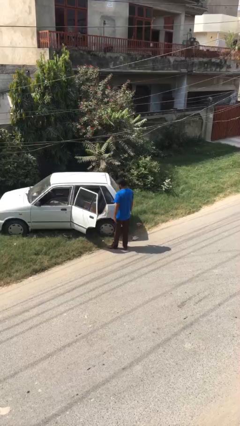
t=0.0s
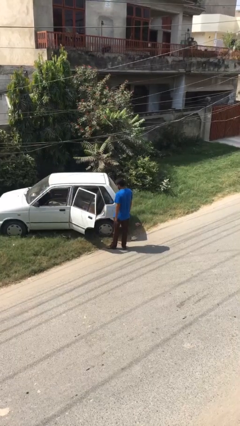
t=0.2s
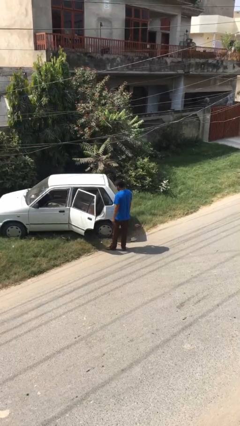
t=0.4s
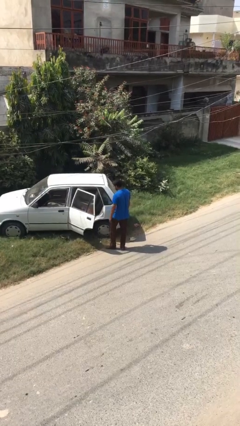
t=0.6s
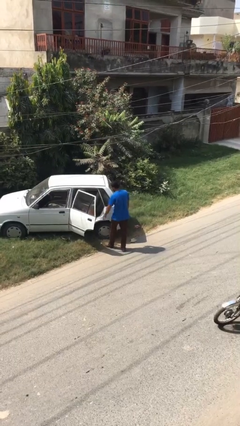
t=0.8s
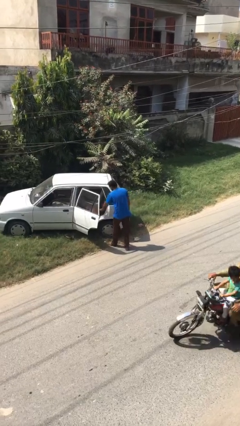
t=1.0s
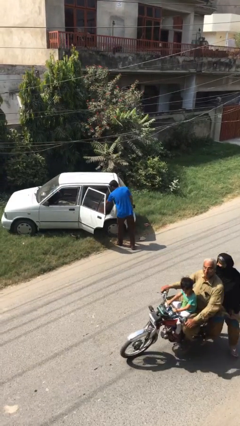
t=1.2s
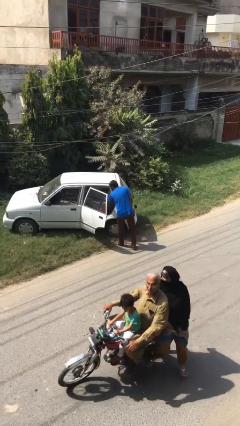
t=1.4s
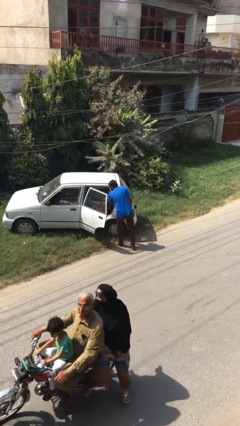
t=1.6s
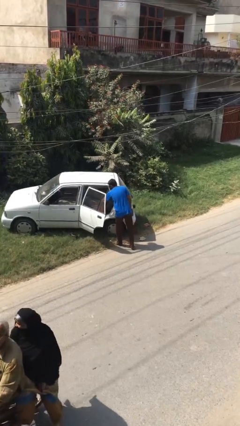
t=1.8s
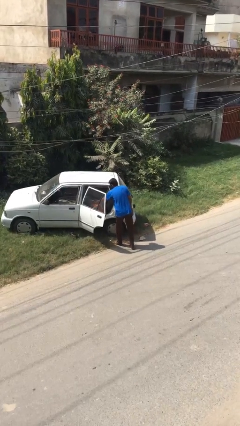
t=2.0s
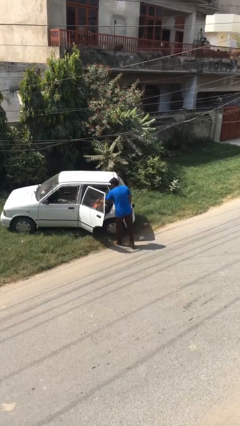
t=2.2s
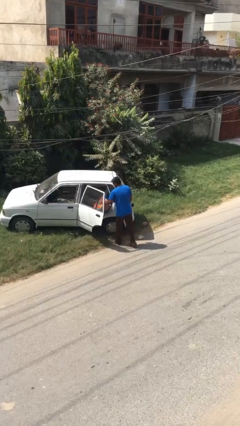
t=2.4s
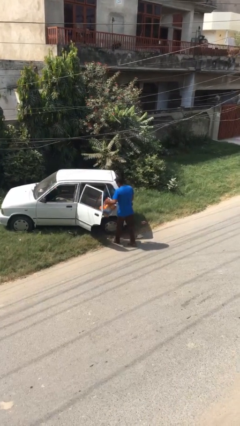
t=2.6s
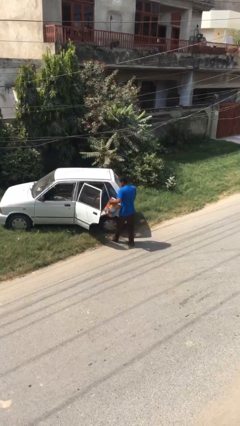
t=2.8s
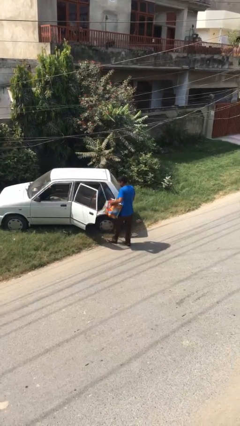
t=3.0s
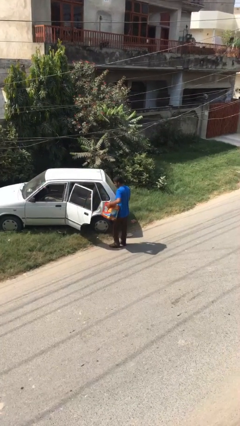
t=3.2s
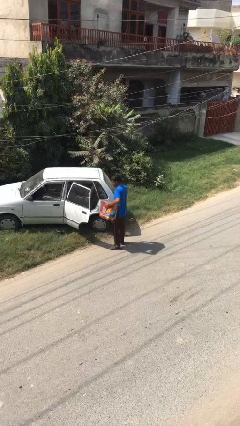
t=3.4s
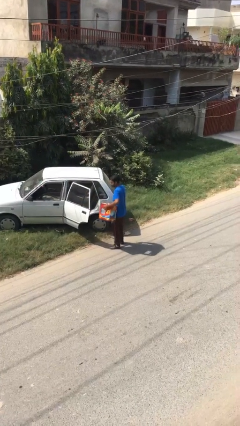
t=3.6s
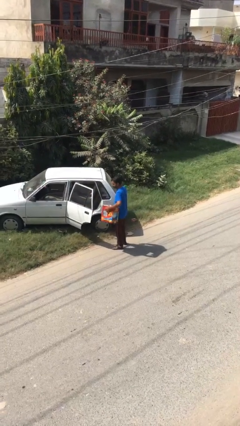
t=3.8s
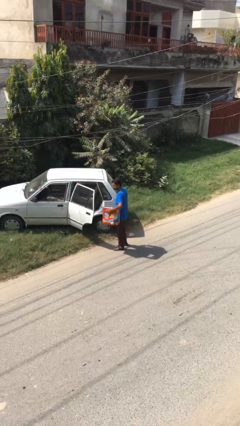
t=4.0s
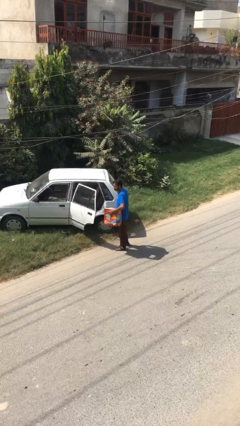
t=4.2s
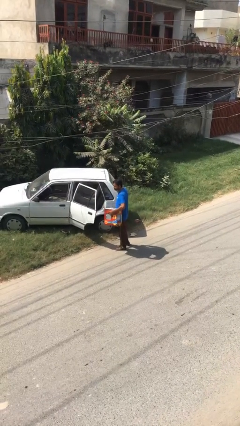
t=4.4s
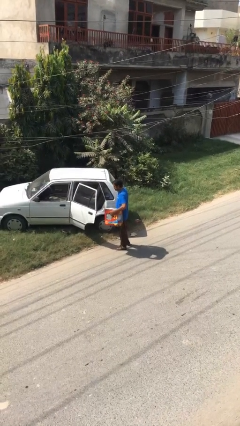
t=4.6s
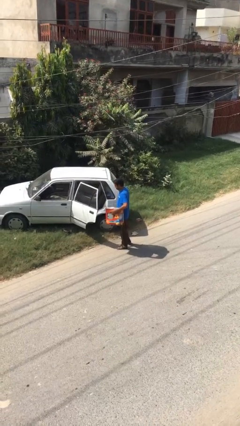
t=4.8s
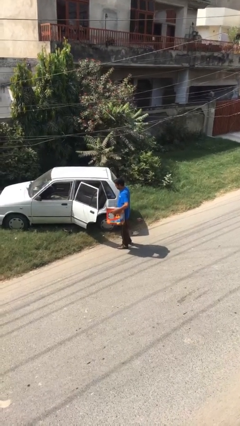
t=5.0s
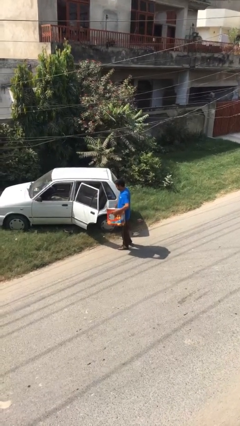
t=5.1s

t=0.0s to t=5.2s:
person unloads car

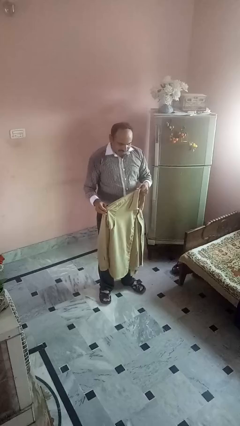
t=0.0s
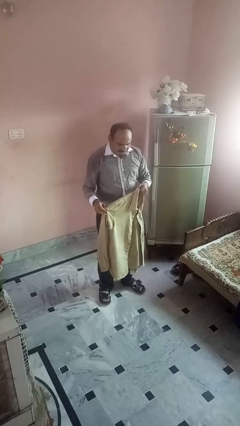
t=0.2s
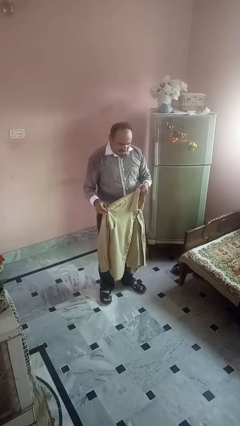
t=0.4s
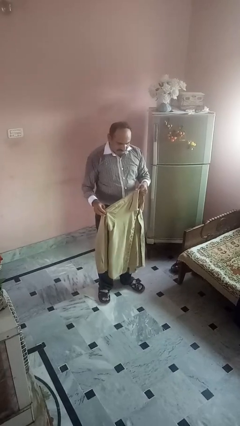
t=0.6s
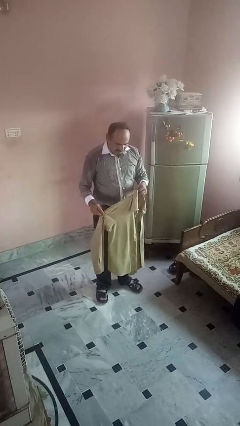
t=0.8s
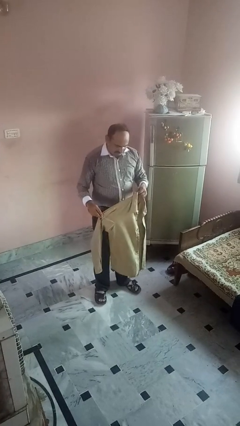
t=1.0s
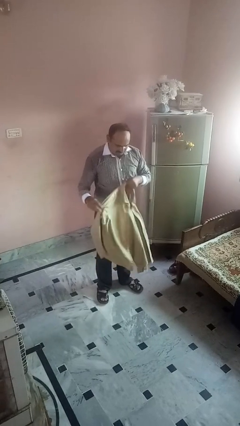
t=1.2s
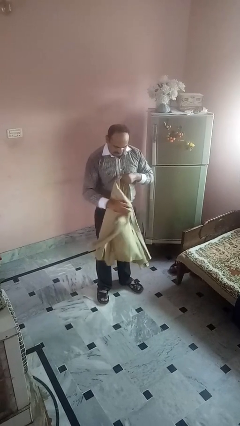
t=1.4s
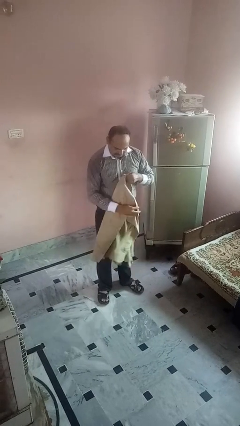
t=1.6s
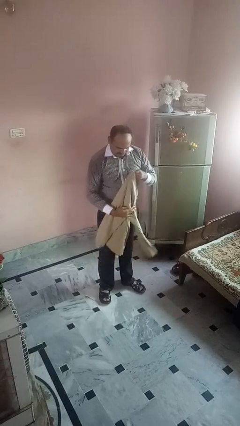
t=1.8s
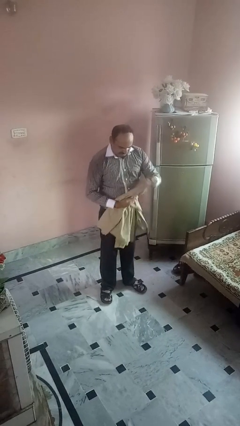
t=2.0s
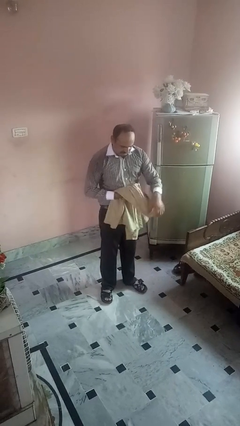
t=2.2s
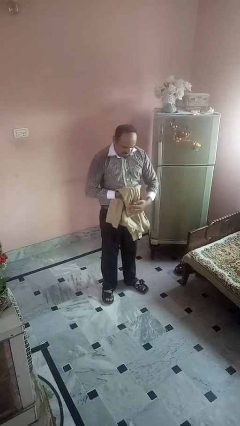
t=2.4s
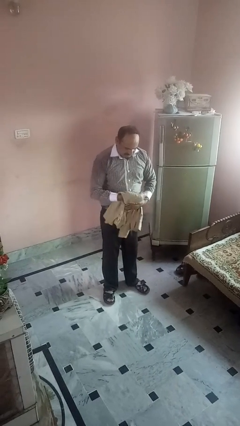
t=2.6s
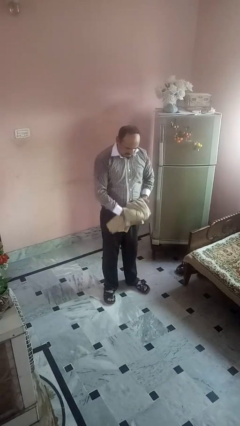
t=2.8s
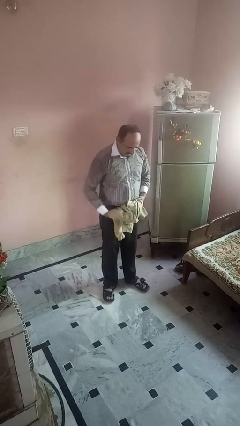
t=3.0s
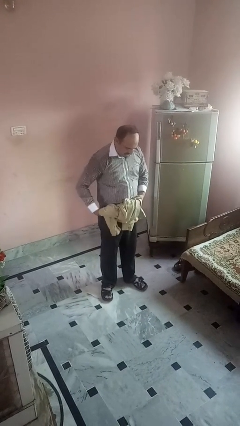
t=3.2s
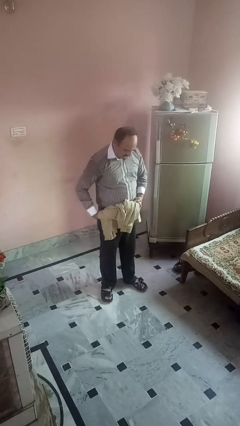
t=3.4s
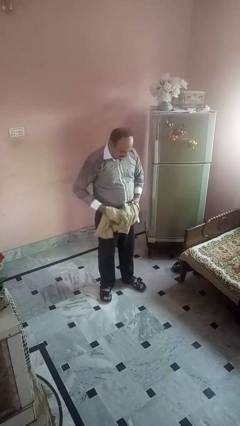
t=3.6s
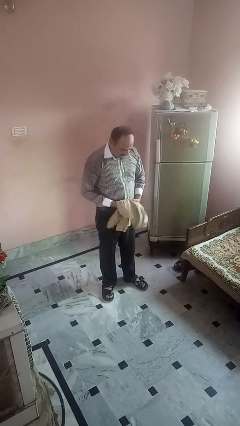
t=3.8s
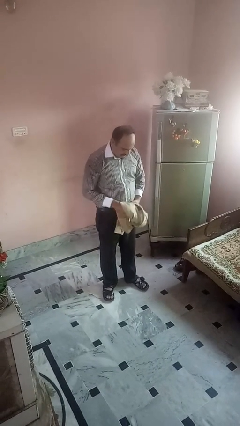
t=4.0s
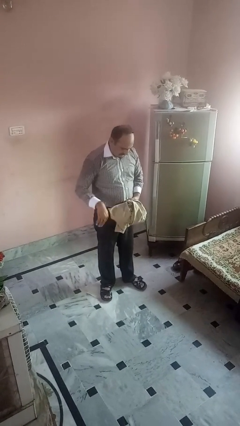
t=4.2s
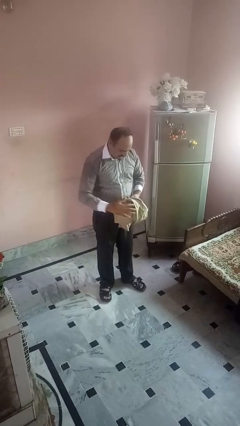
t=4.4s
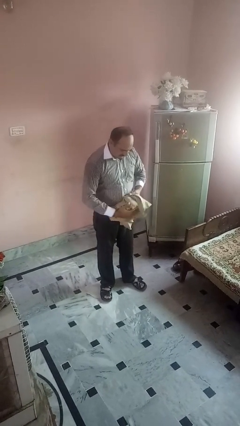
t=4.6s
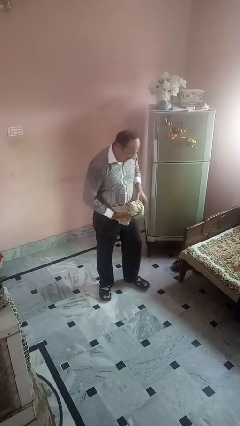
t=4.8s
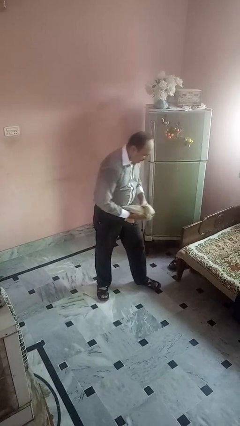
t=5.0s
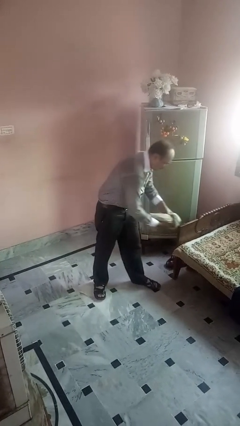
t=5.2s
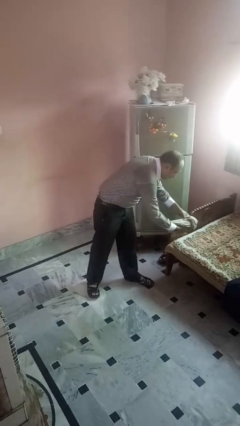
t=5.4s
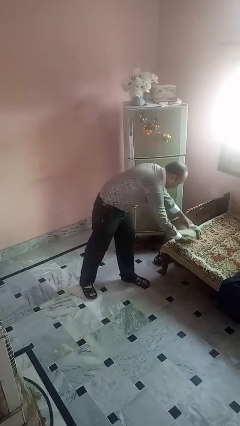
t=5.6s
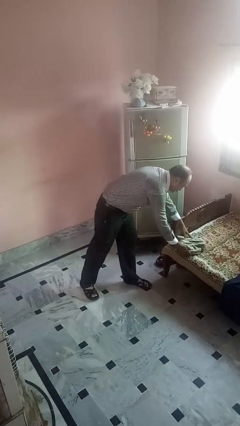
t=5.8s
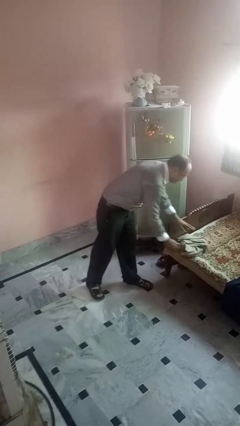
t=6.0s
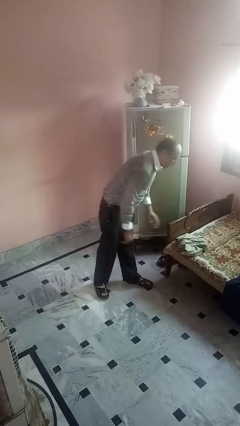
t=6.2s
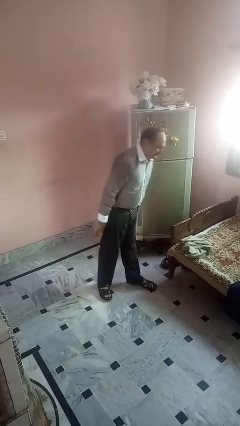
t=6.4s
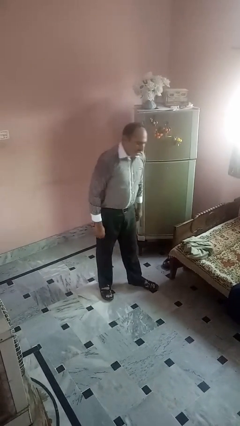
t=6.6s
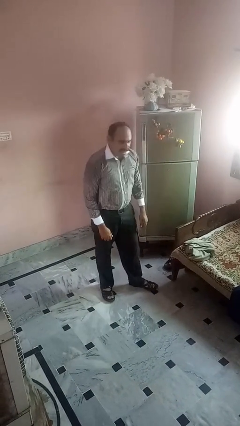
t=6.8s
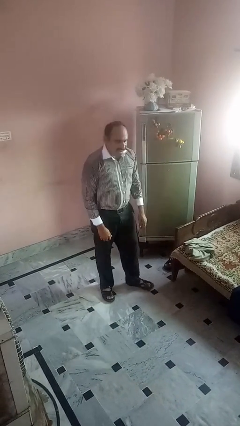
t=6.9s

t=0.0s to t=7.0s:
person folds shirt

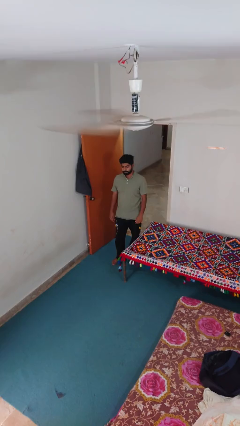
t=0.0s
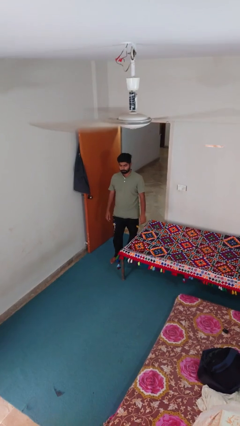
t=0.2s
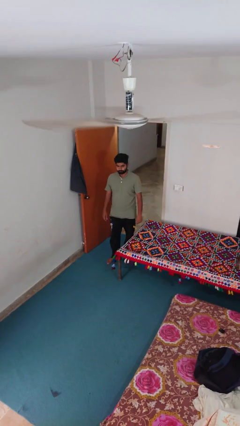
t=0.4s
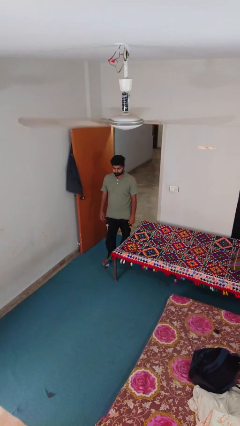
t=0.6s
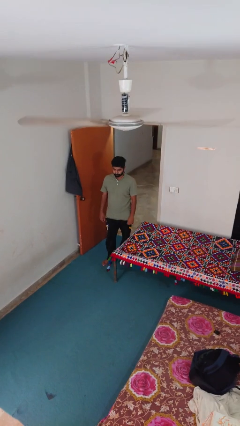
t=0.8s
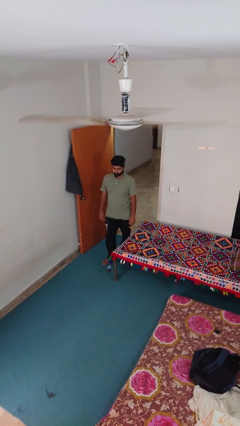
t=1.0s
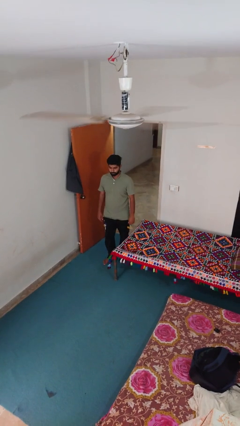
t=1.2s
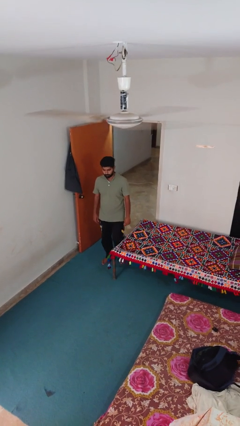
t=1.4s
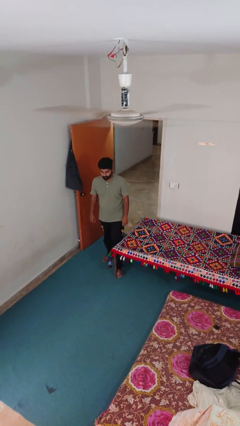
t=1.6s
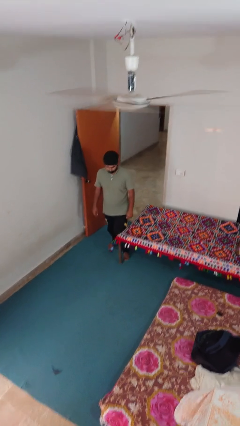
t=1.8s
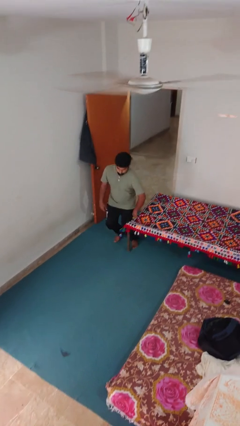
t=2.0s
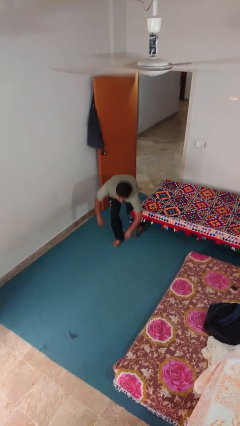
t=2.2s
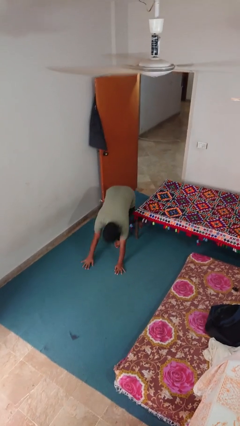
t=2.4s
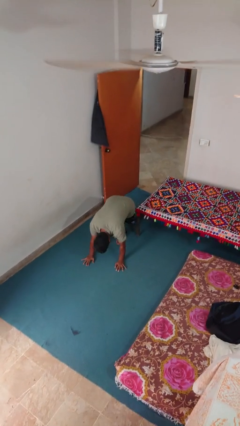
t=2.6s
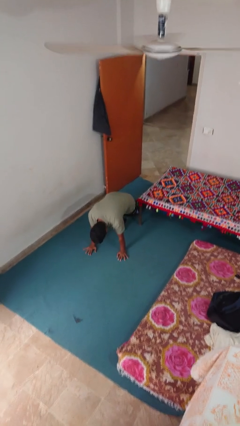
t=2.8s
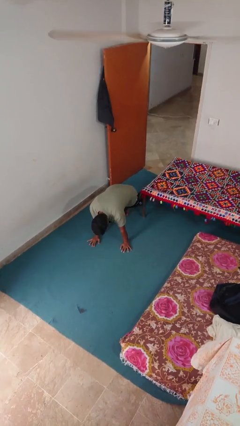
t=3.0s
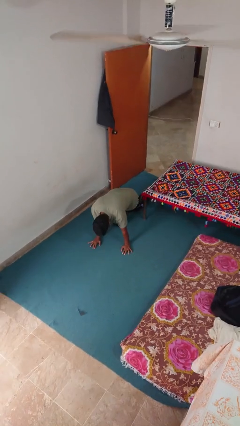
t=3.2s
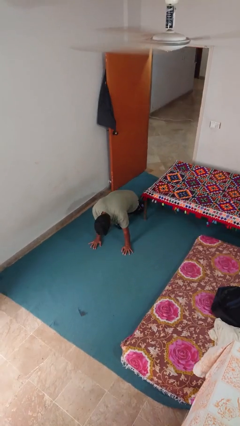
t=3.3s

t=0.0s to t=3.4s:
person trips on object on floor

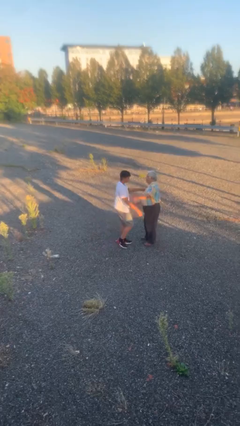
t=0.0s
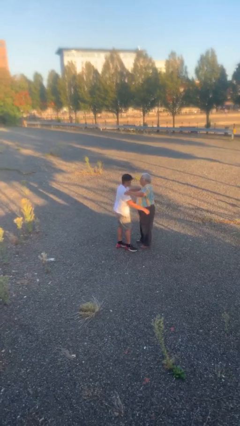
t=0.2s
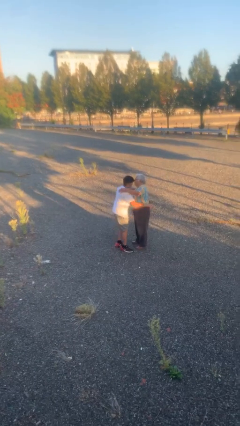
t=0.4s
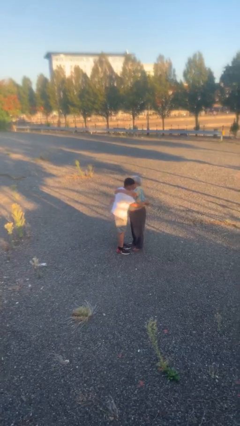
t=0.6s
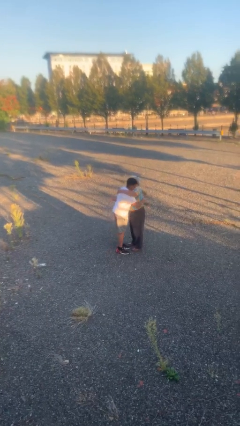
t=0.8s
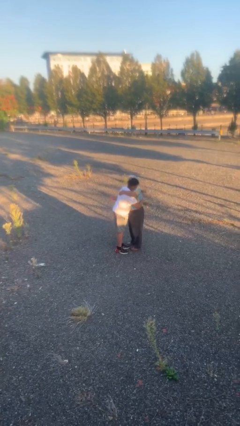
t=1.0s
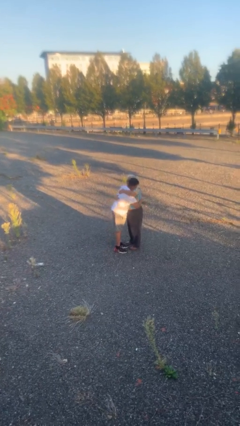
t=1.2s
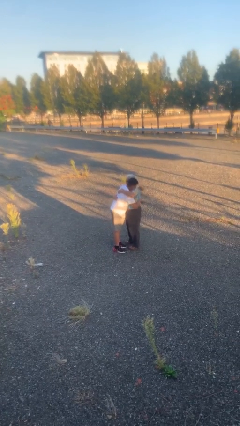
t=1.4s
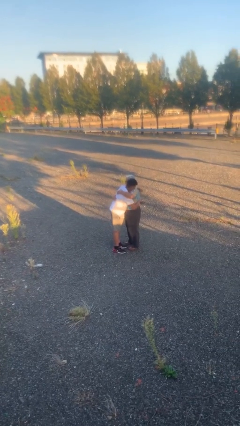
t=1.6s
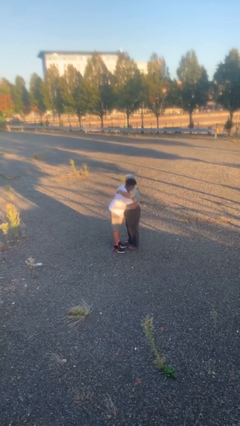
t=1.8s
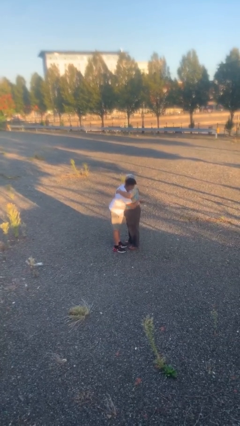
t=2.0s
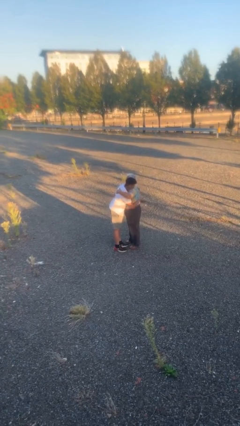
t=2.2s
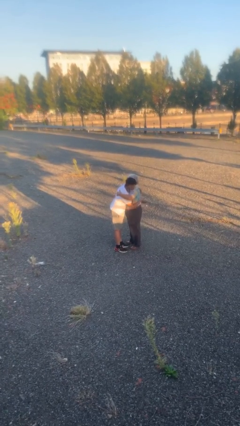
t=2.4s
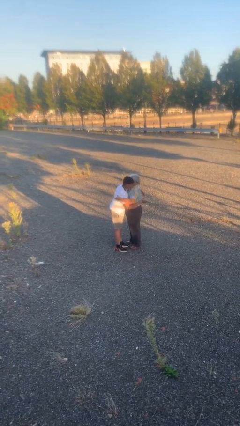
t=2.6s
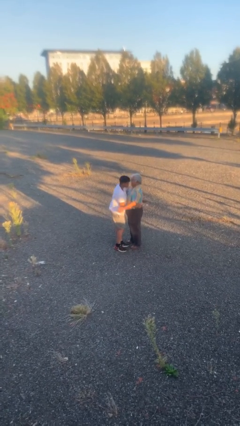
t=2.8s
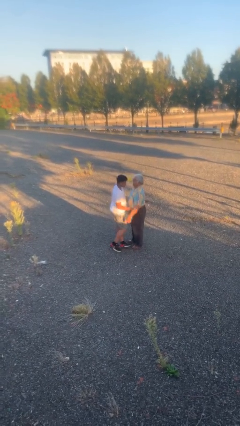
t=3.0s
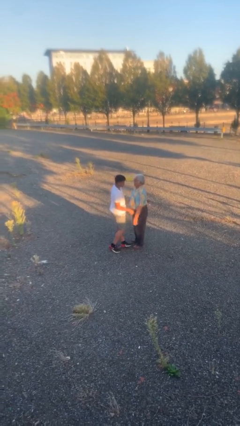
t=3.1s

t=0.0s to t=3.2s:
person embraces person
